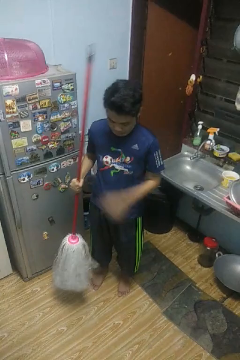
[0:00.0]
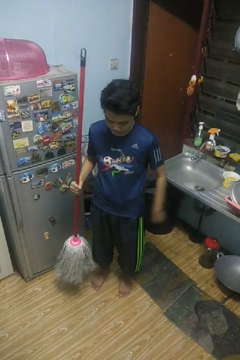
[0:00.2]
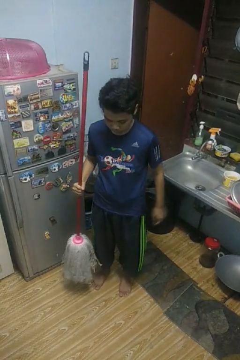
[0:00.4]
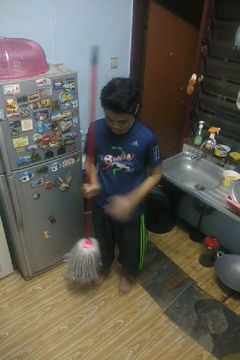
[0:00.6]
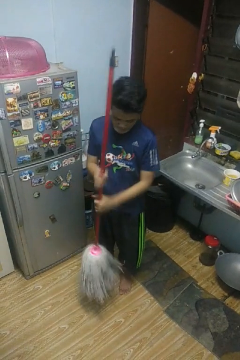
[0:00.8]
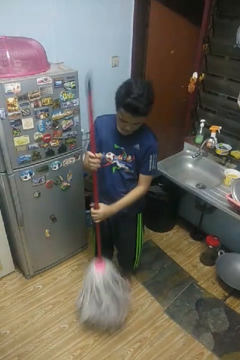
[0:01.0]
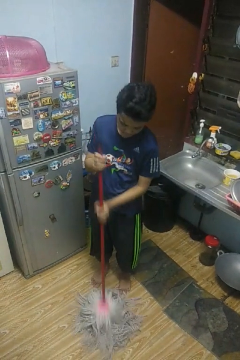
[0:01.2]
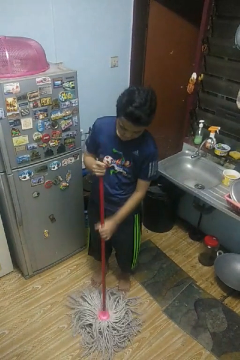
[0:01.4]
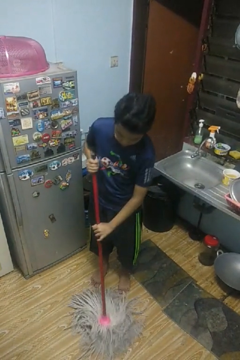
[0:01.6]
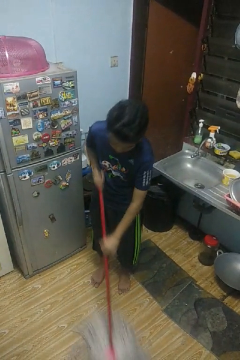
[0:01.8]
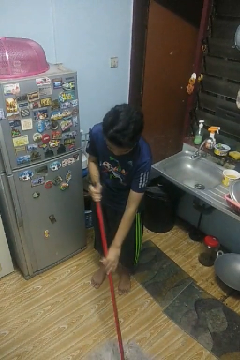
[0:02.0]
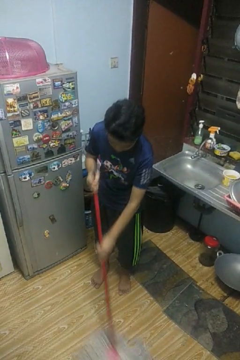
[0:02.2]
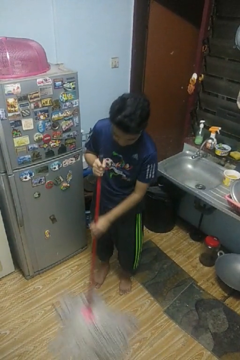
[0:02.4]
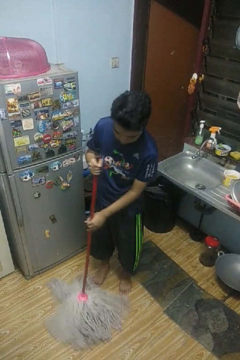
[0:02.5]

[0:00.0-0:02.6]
person mops

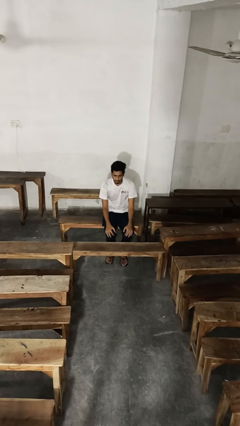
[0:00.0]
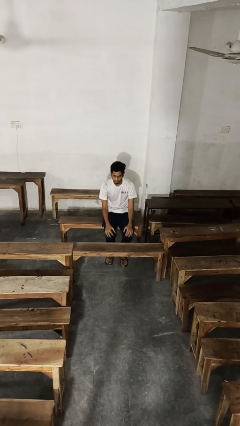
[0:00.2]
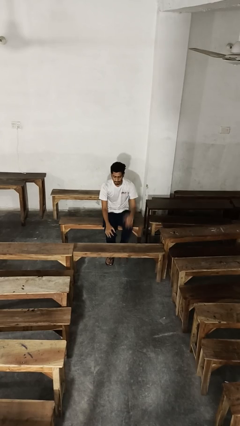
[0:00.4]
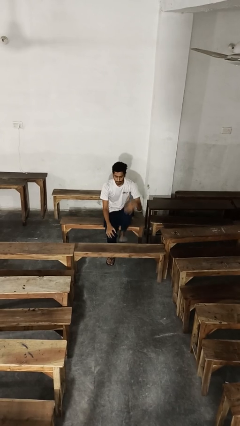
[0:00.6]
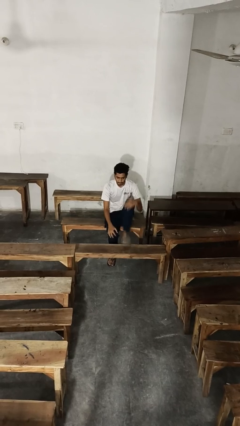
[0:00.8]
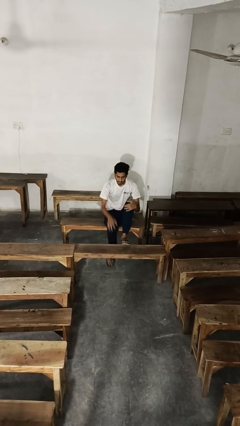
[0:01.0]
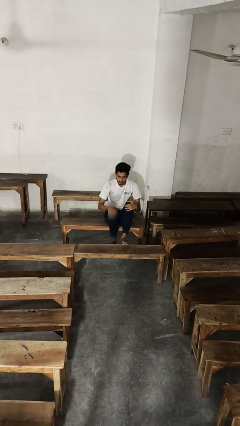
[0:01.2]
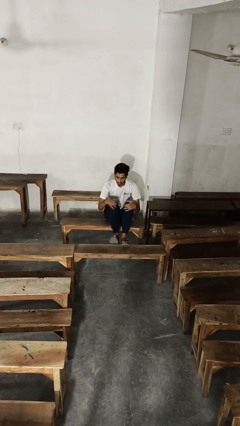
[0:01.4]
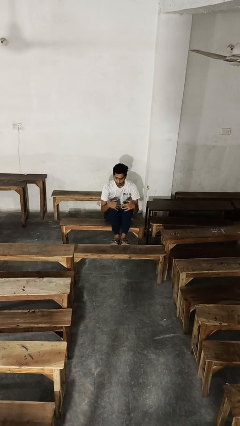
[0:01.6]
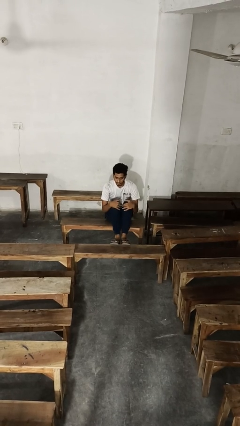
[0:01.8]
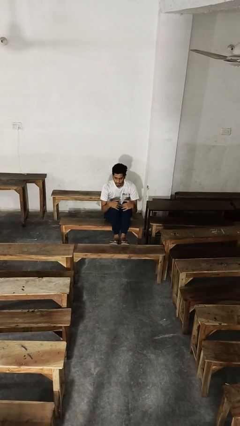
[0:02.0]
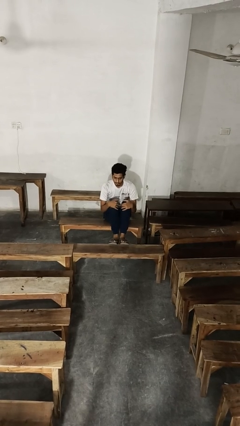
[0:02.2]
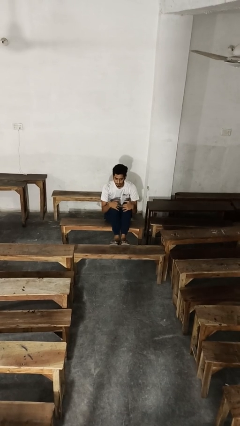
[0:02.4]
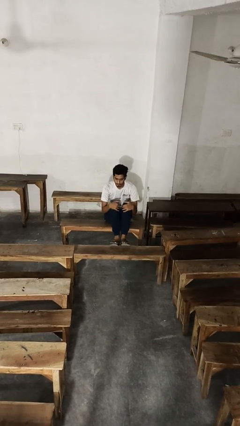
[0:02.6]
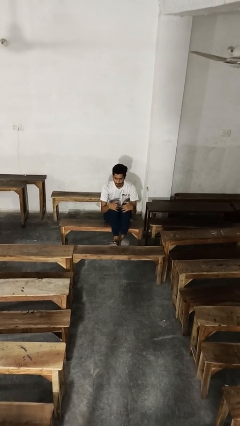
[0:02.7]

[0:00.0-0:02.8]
person puts feet up

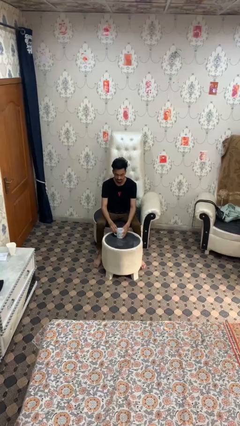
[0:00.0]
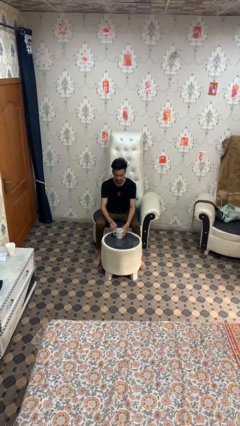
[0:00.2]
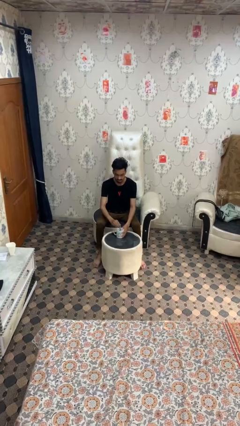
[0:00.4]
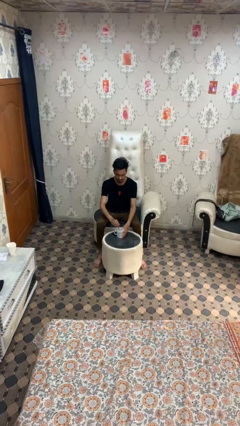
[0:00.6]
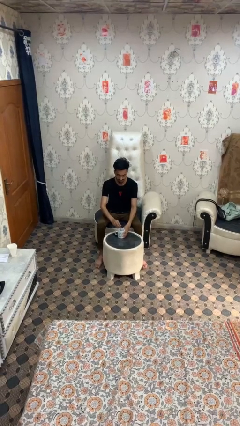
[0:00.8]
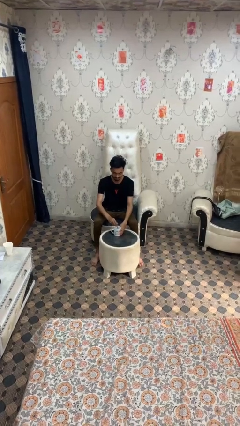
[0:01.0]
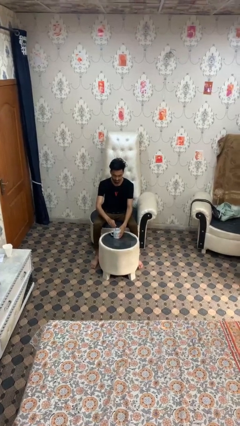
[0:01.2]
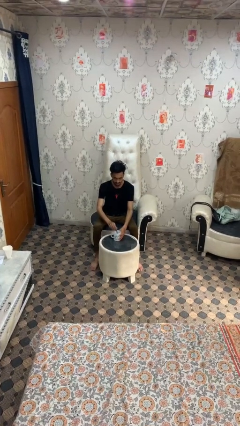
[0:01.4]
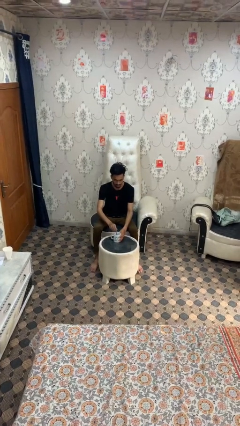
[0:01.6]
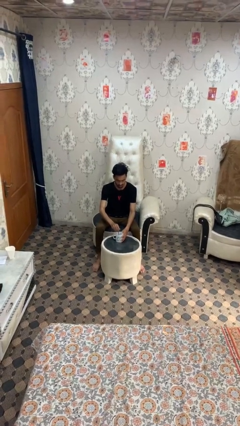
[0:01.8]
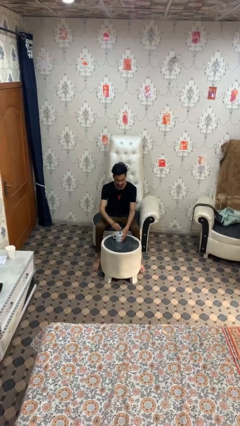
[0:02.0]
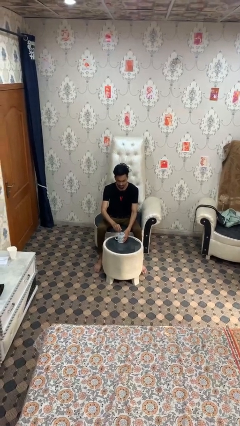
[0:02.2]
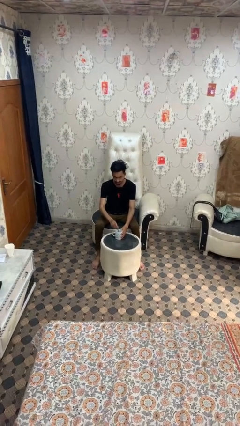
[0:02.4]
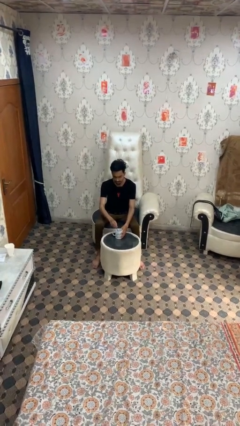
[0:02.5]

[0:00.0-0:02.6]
person stirs mug

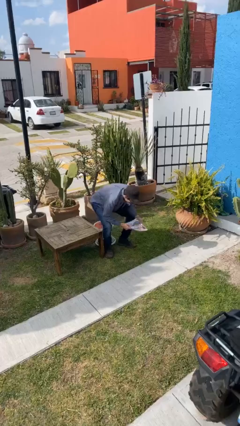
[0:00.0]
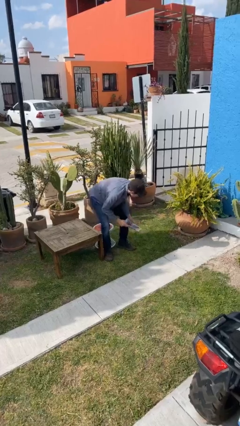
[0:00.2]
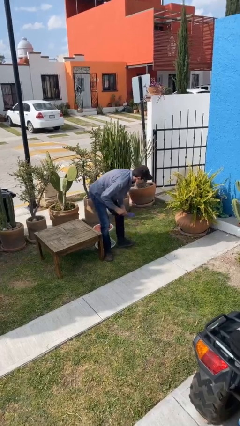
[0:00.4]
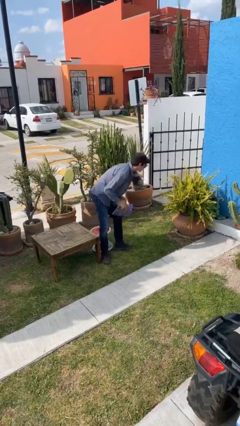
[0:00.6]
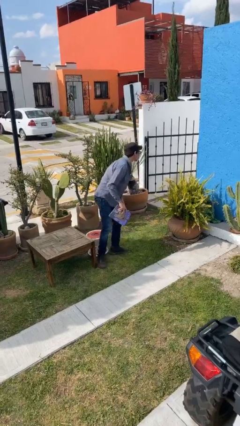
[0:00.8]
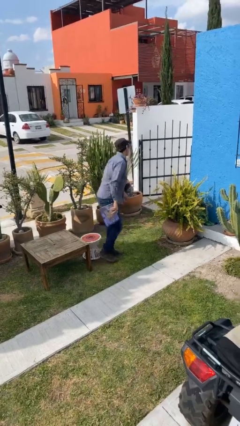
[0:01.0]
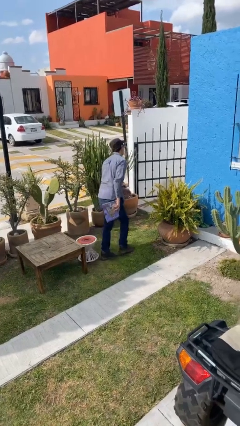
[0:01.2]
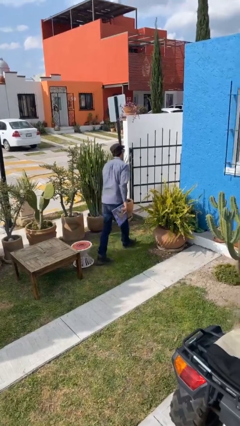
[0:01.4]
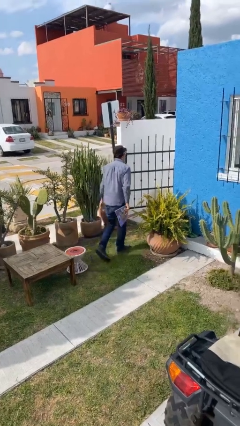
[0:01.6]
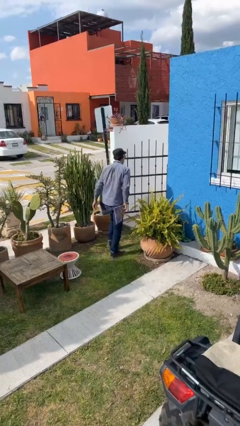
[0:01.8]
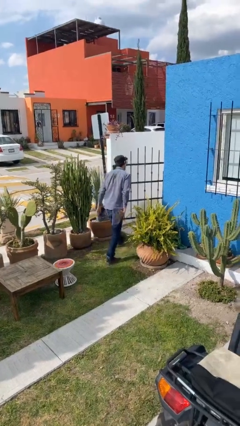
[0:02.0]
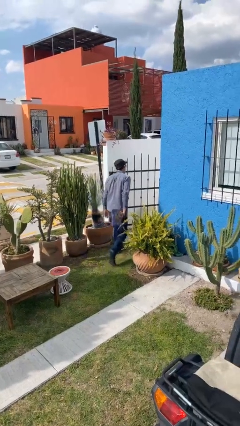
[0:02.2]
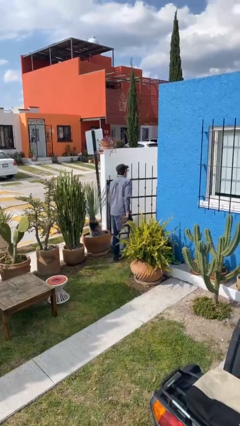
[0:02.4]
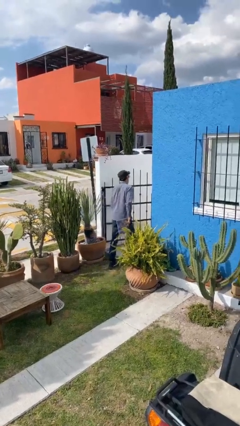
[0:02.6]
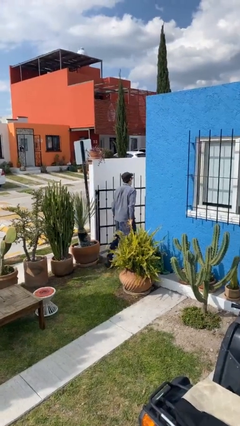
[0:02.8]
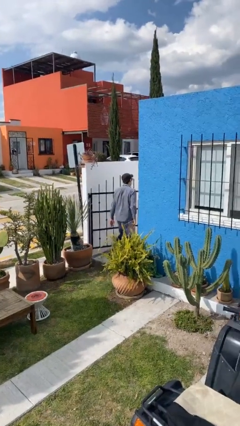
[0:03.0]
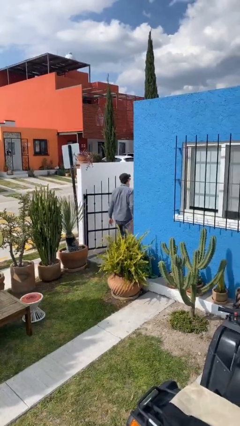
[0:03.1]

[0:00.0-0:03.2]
person stands up

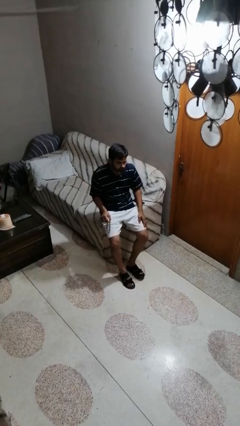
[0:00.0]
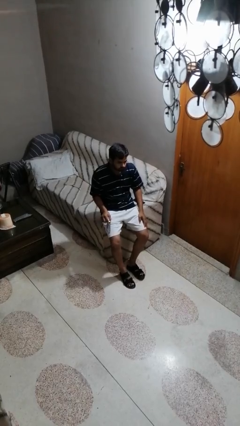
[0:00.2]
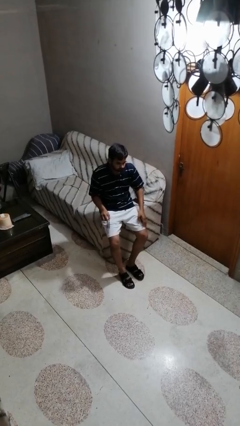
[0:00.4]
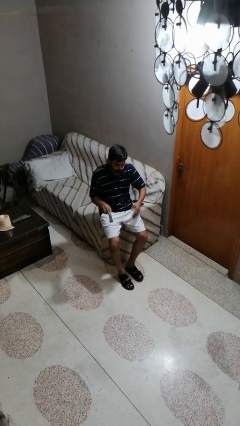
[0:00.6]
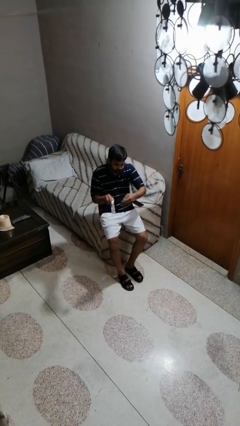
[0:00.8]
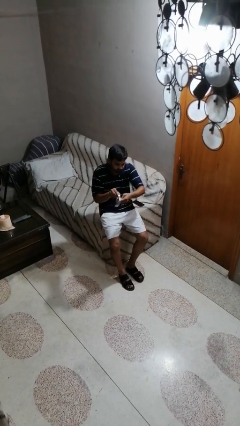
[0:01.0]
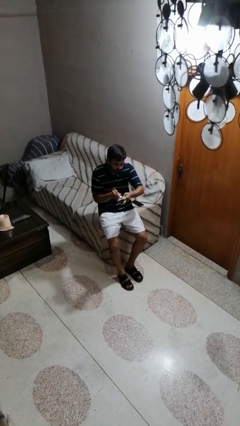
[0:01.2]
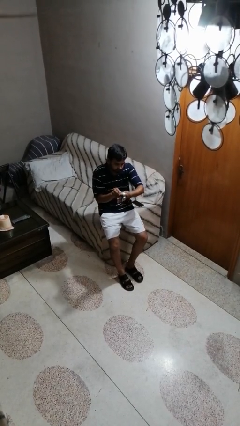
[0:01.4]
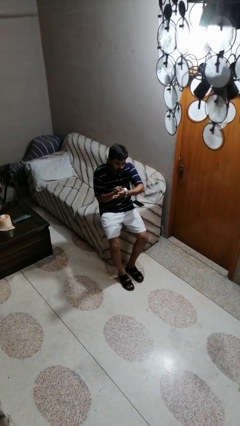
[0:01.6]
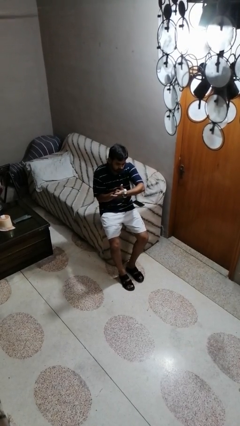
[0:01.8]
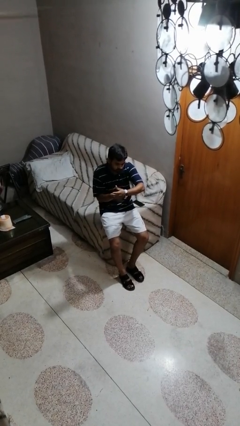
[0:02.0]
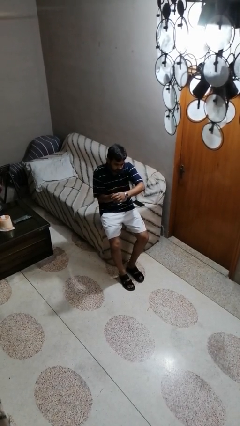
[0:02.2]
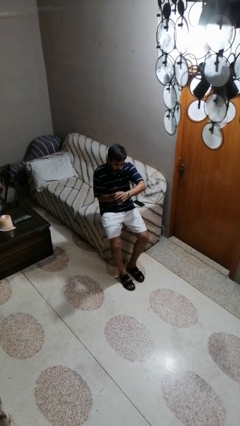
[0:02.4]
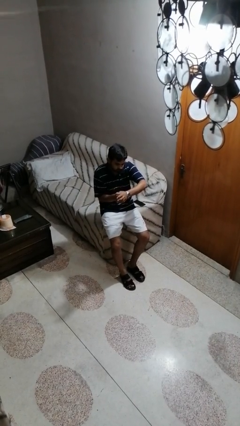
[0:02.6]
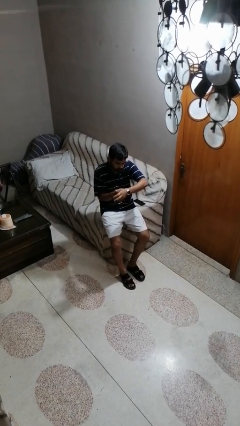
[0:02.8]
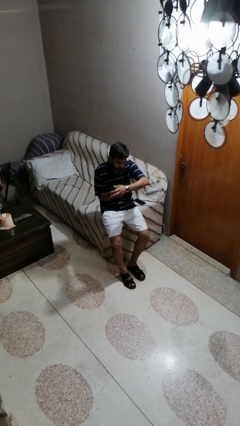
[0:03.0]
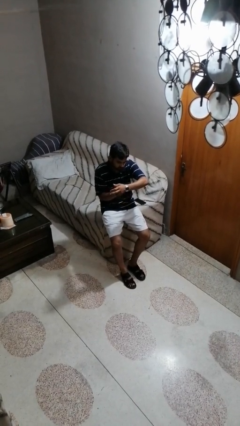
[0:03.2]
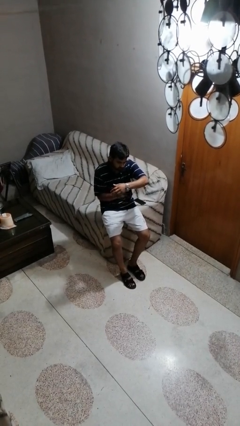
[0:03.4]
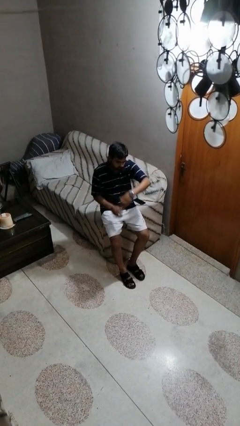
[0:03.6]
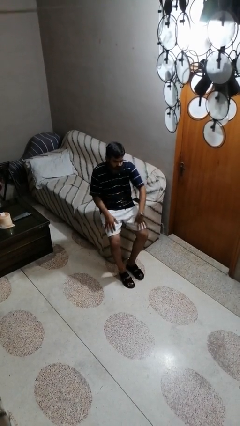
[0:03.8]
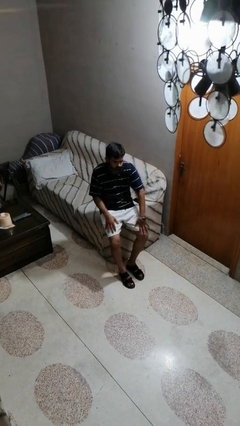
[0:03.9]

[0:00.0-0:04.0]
person puts on wristwatch

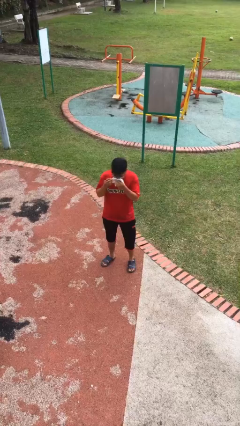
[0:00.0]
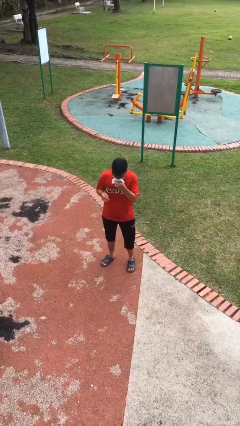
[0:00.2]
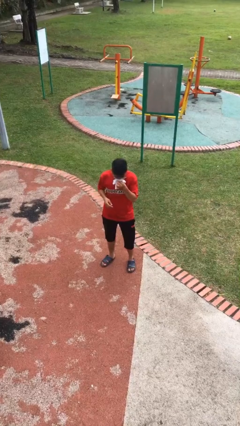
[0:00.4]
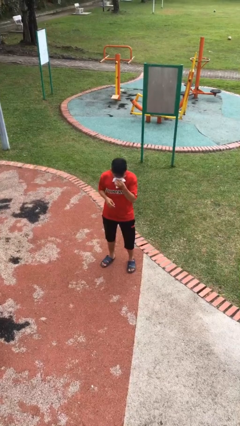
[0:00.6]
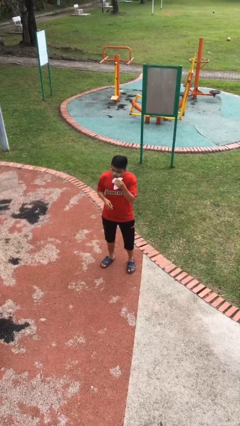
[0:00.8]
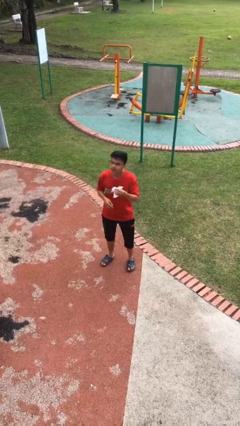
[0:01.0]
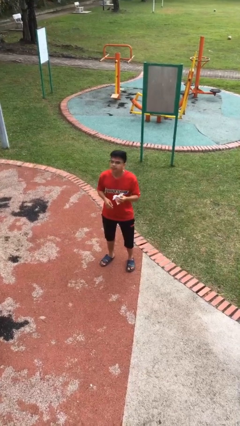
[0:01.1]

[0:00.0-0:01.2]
person blows nose

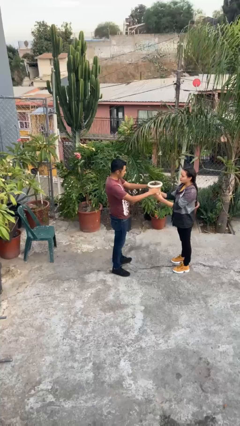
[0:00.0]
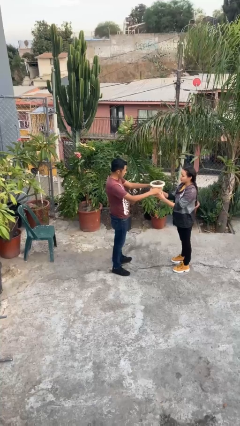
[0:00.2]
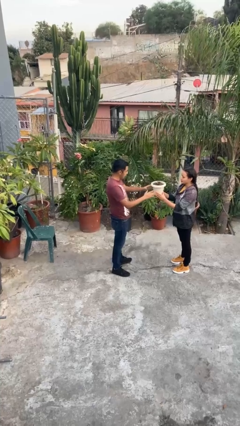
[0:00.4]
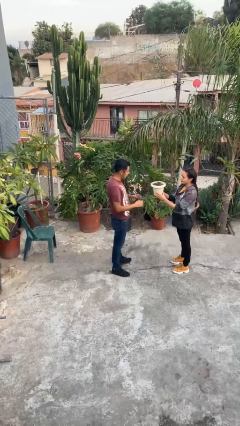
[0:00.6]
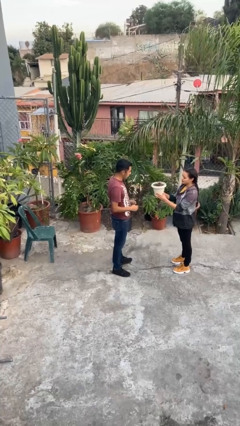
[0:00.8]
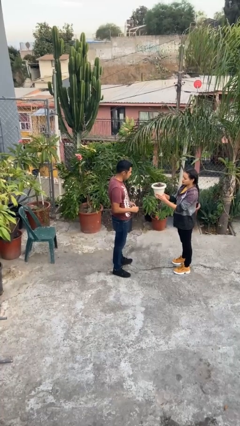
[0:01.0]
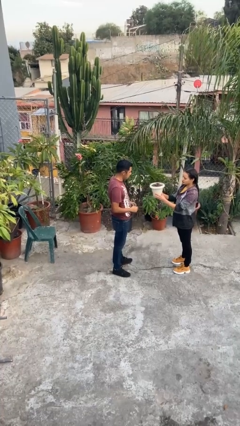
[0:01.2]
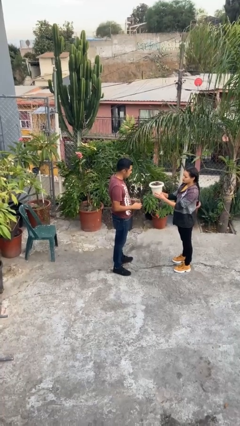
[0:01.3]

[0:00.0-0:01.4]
person transfers object to person

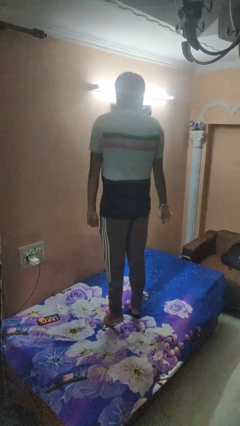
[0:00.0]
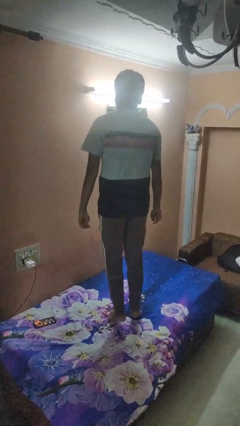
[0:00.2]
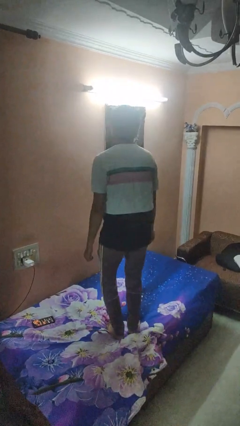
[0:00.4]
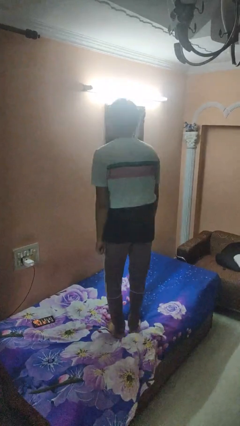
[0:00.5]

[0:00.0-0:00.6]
person jumps on bed
